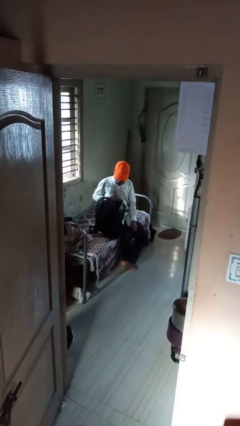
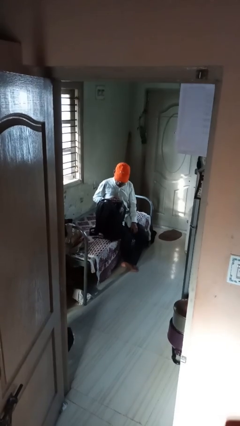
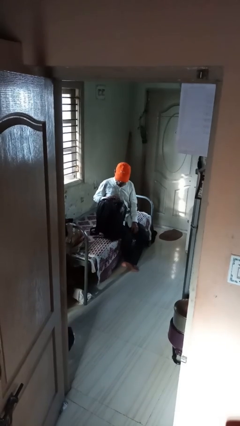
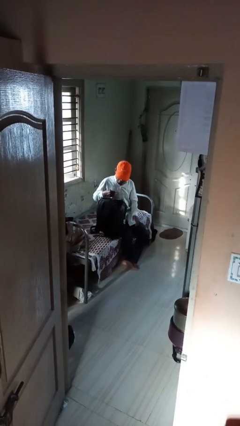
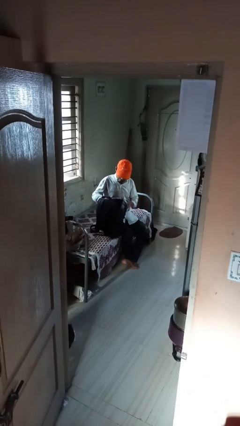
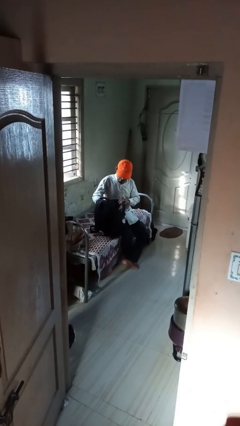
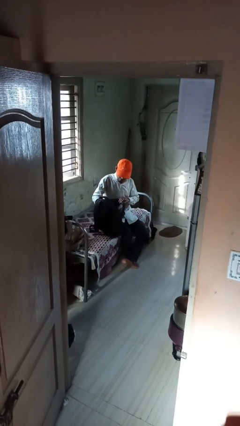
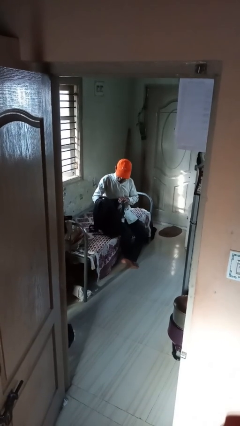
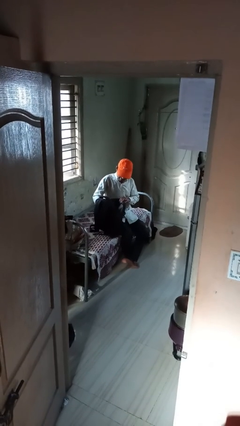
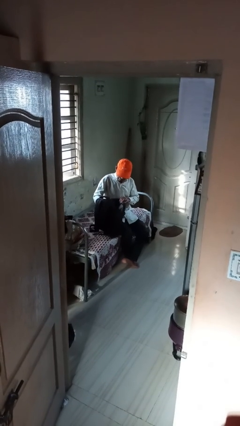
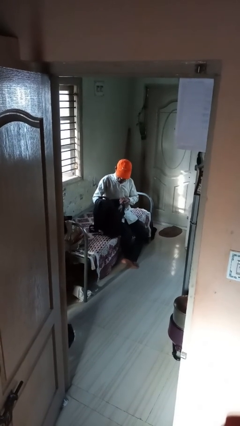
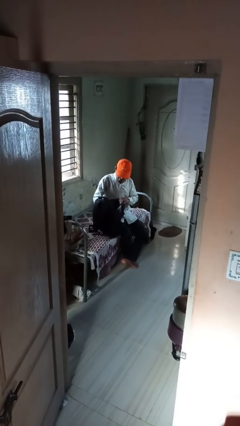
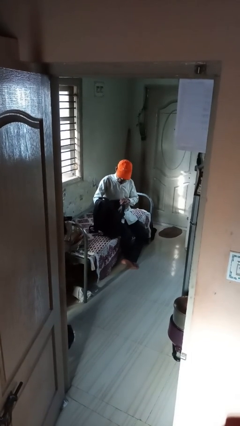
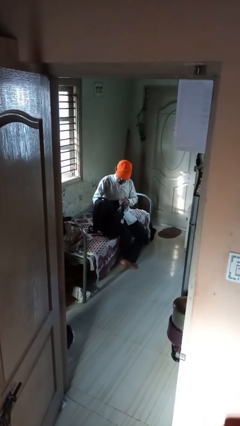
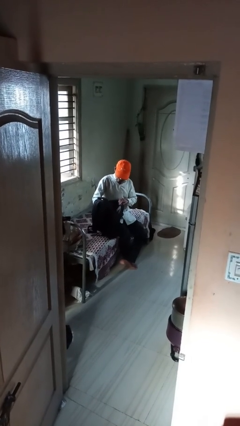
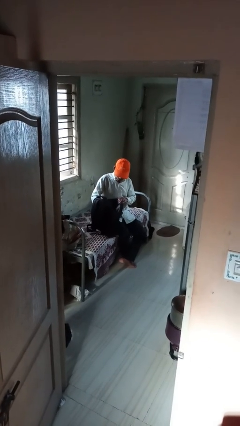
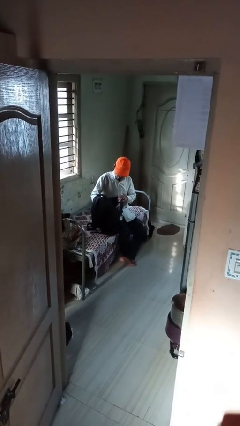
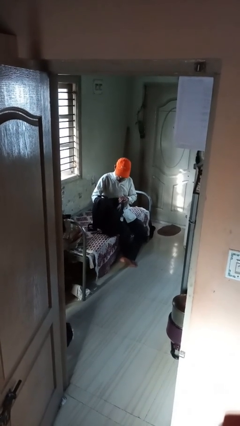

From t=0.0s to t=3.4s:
person searches in backpack

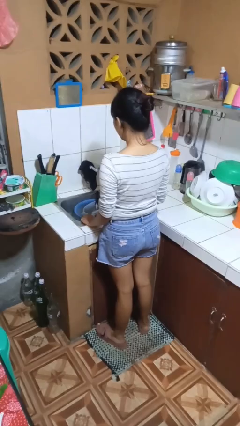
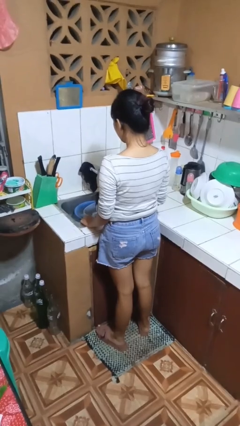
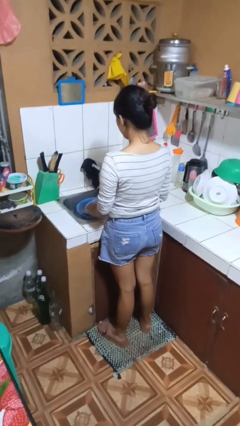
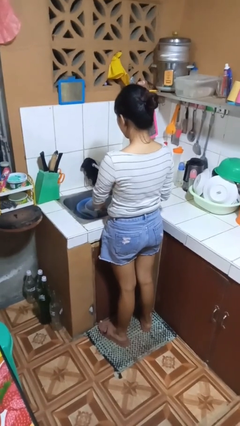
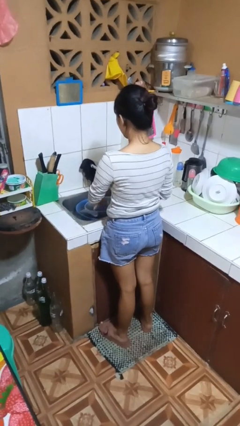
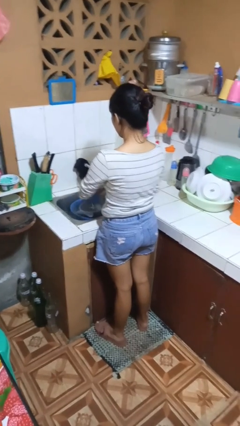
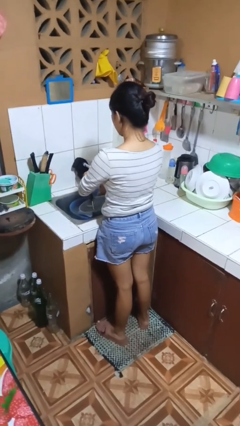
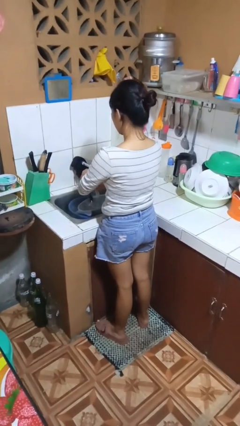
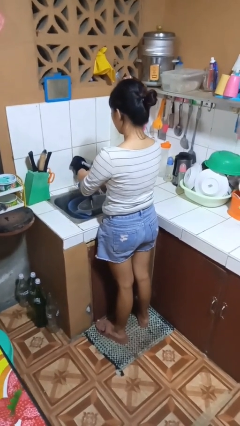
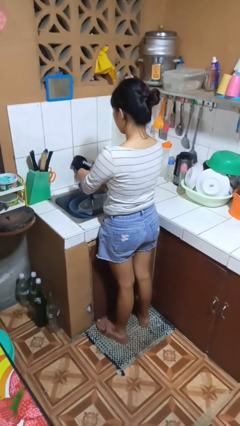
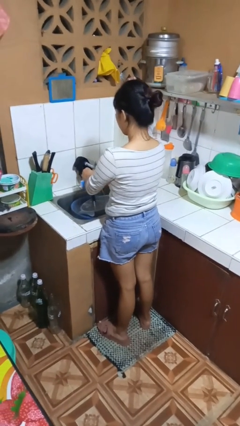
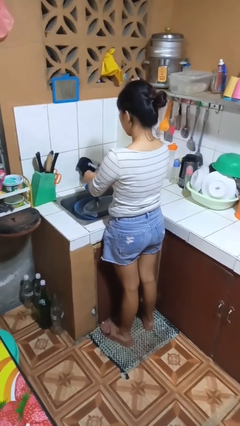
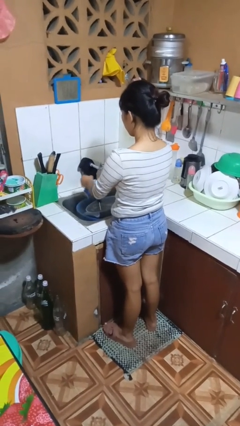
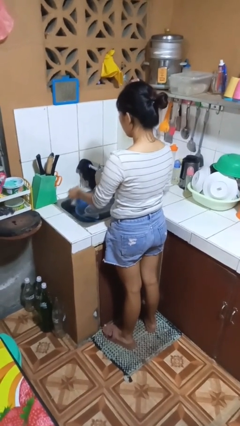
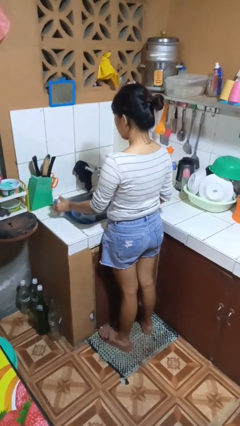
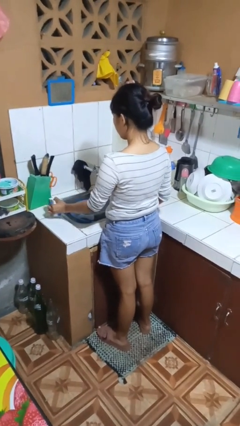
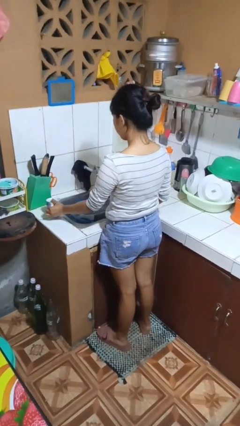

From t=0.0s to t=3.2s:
person washes dish

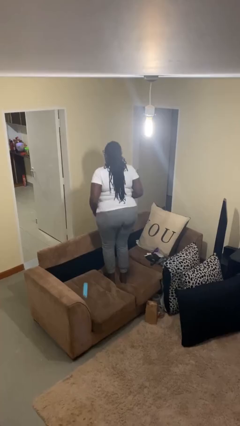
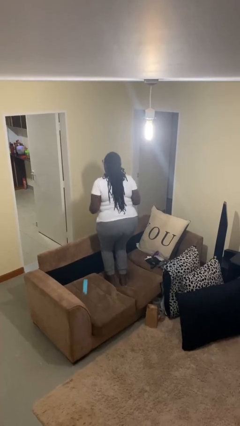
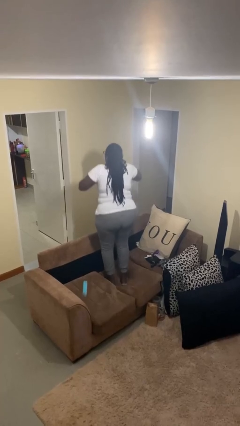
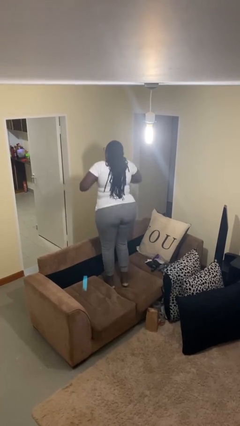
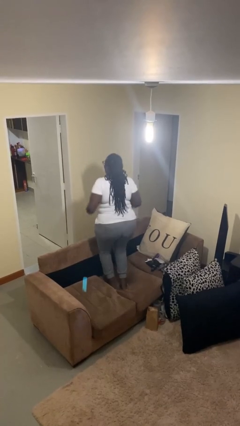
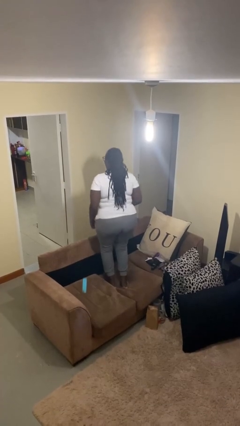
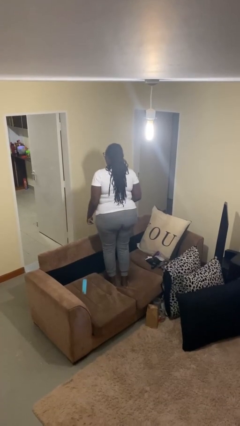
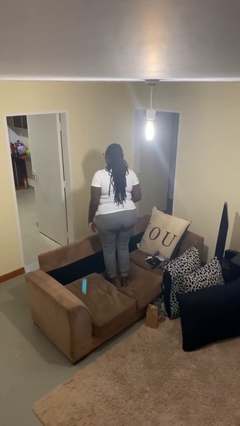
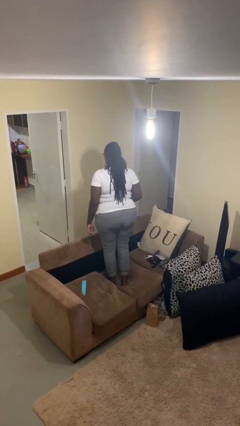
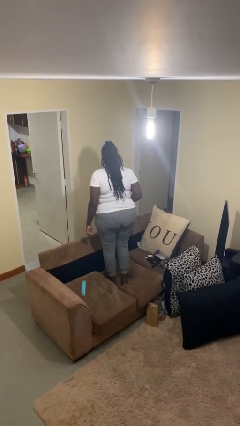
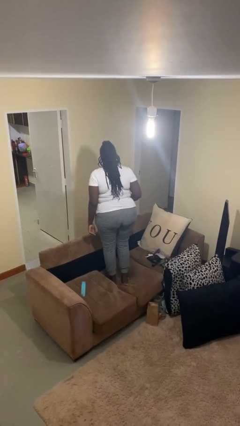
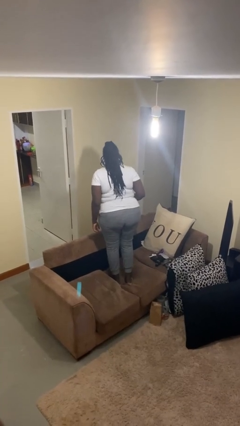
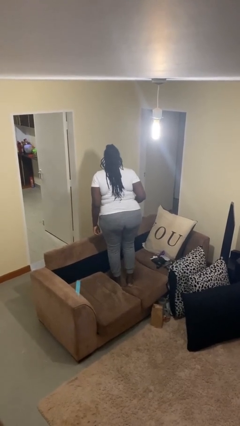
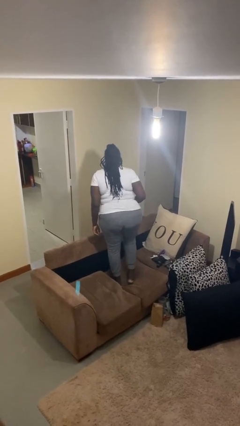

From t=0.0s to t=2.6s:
person jumps on couch

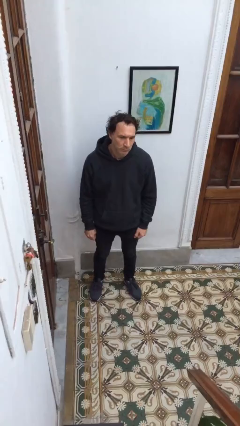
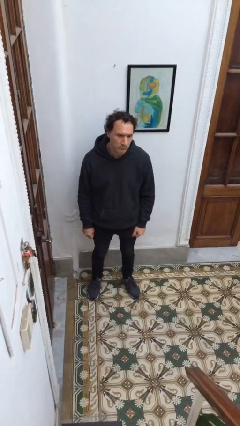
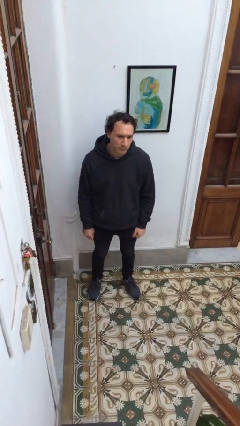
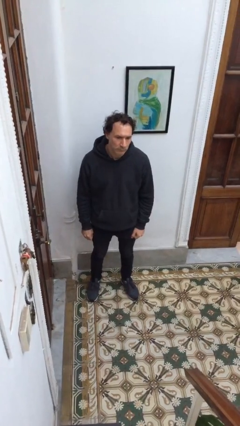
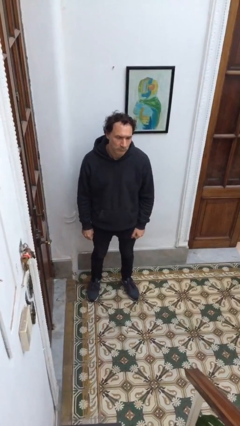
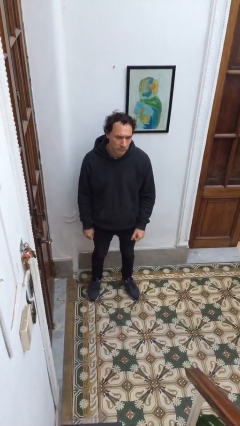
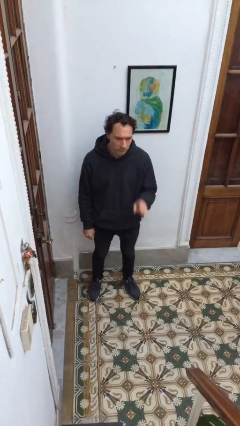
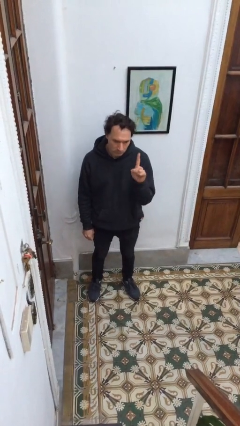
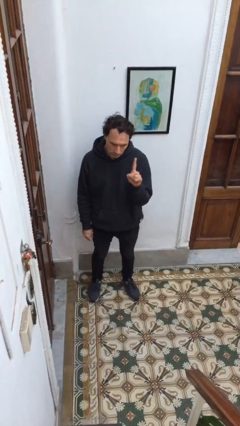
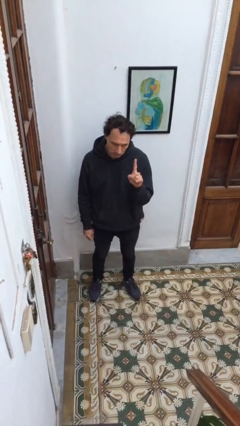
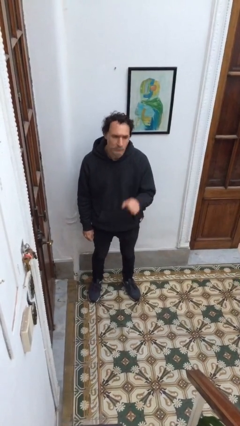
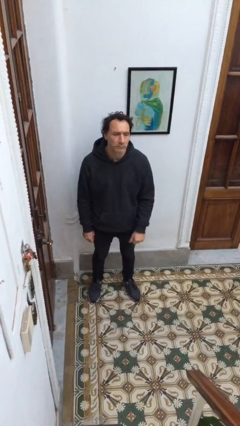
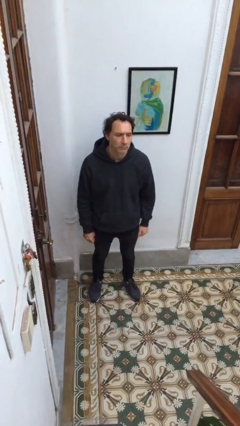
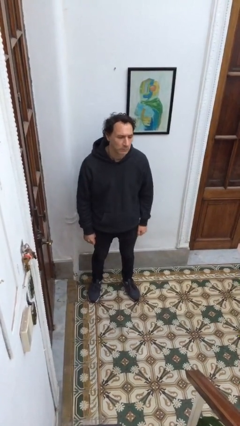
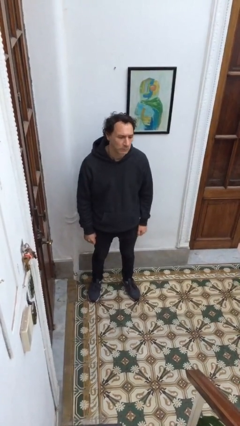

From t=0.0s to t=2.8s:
person gestures number one

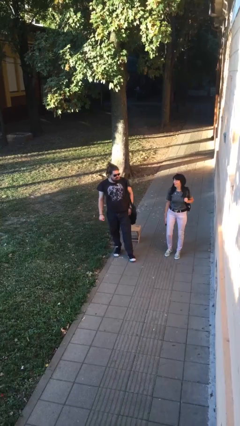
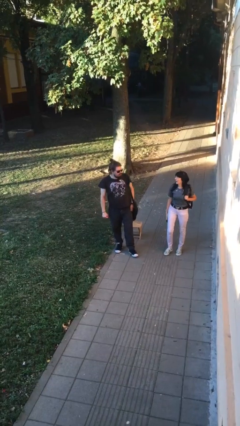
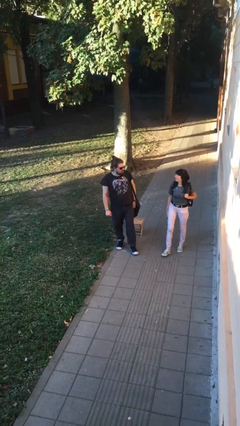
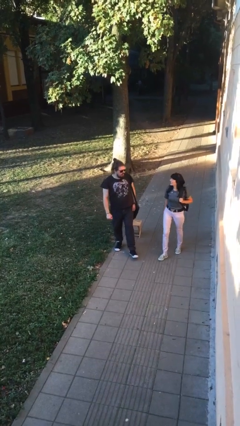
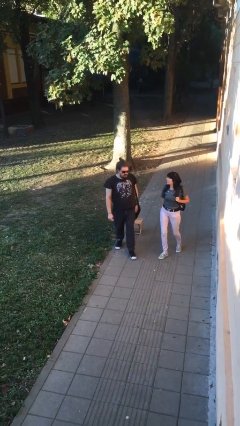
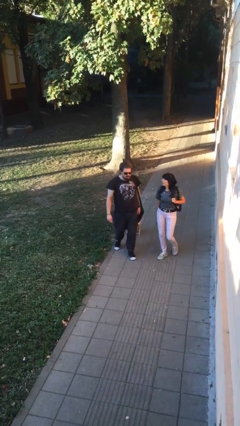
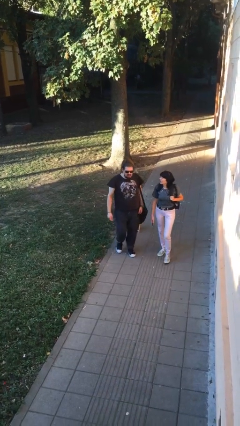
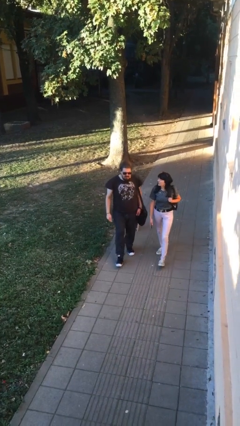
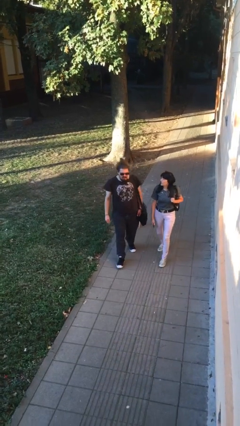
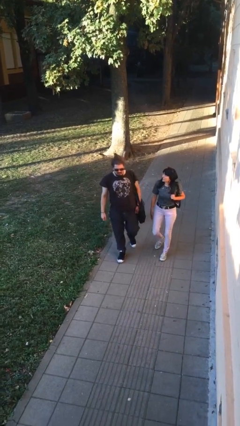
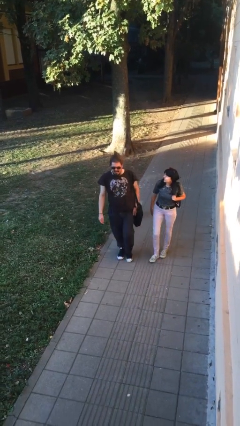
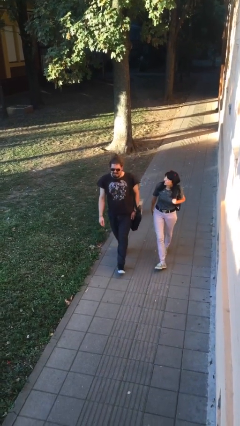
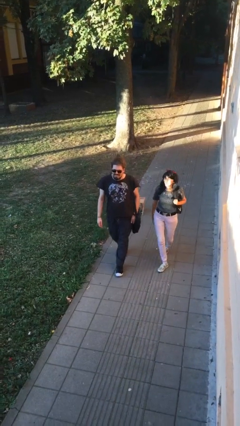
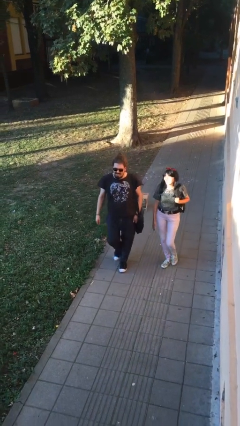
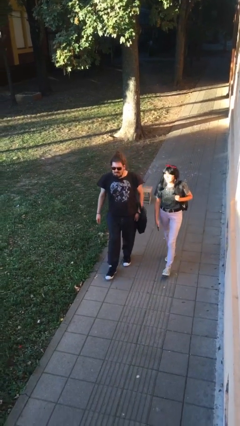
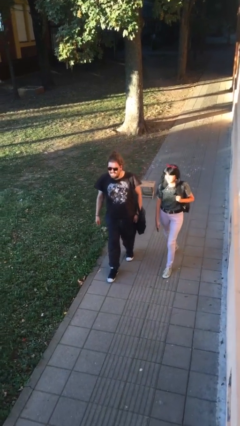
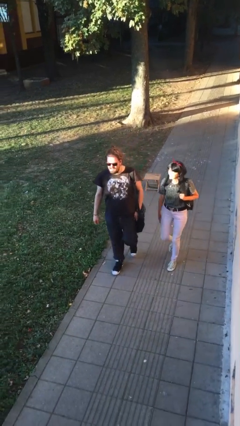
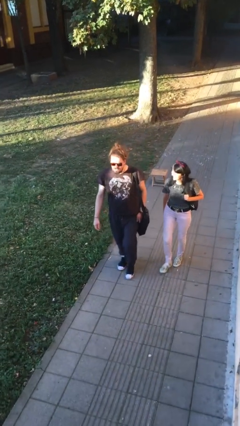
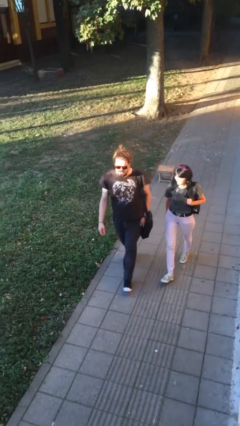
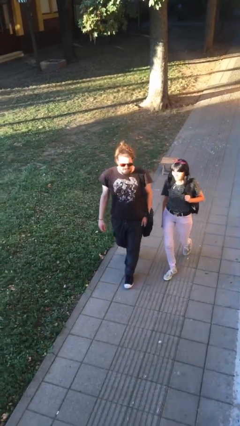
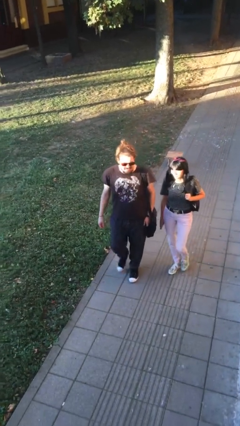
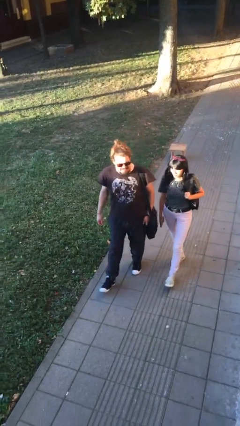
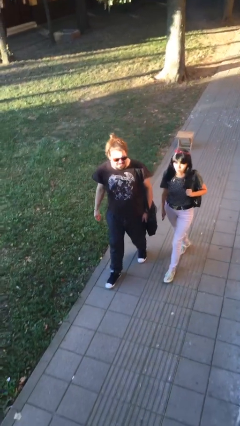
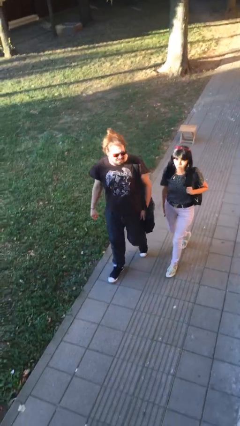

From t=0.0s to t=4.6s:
person talks to person

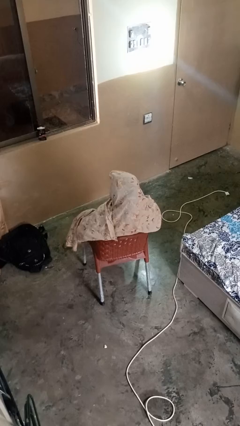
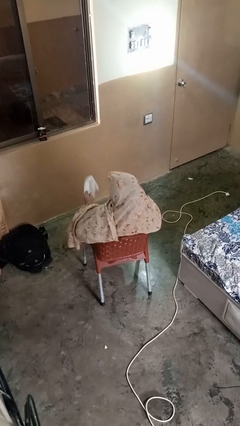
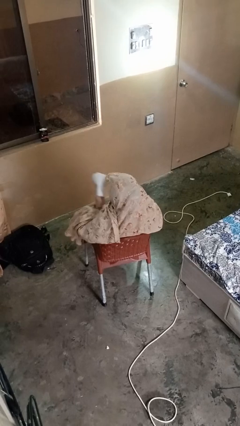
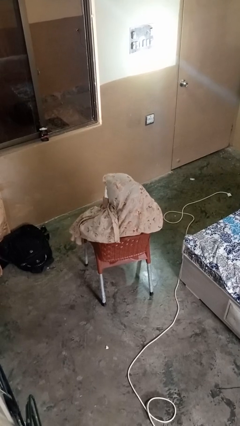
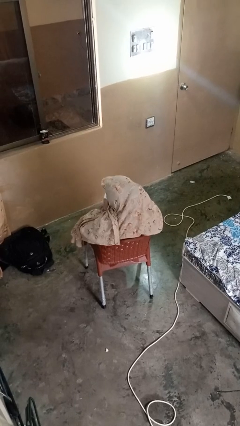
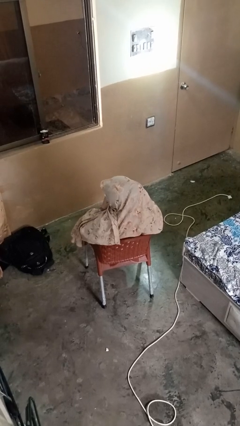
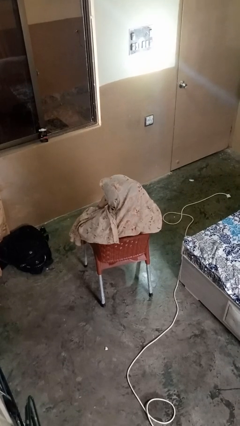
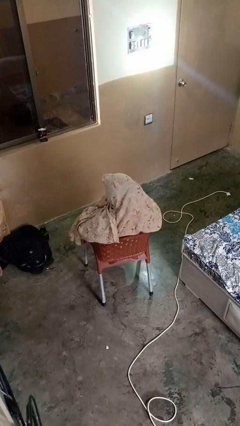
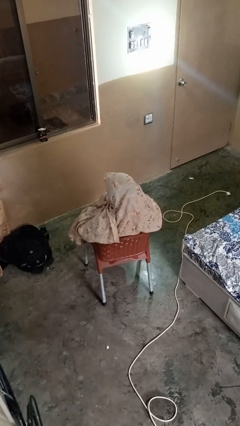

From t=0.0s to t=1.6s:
person wipes mouth with napkin
